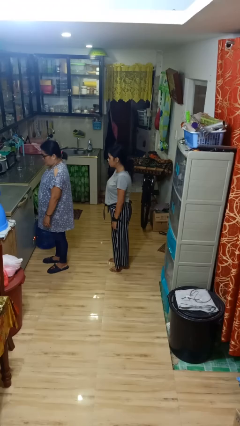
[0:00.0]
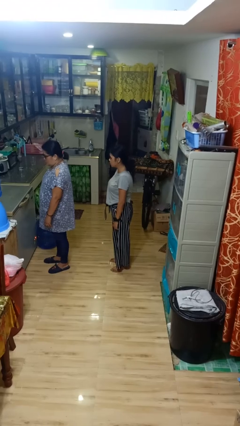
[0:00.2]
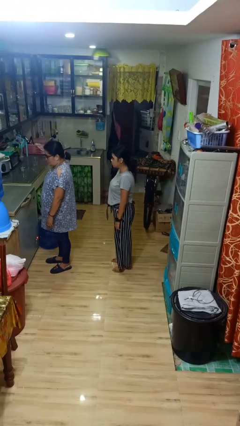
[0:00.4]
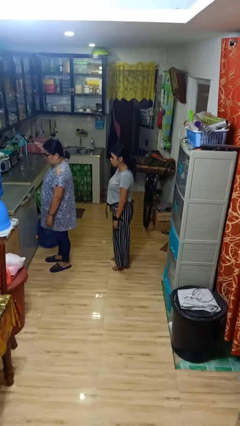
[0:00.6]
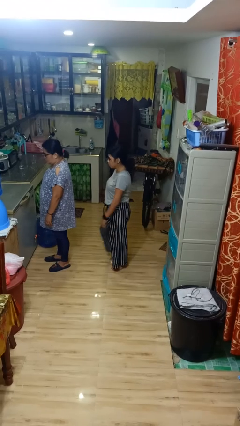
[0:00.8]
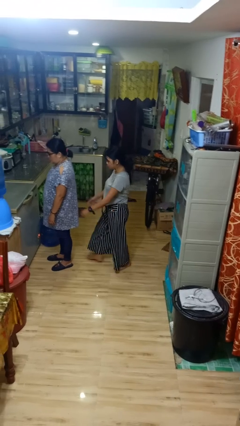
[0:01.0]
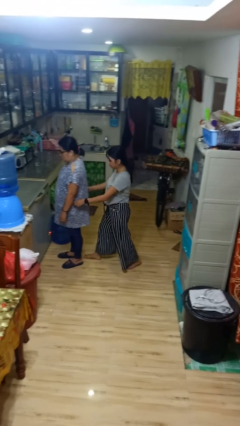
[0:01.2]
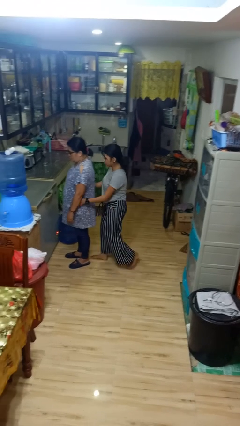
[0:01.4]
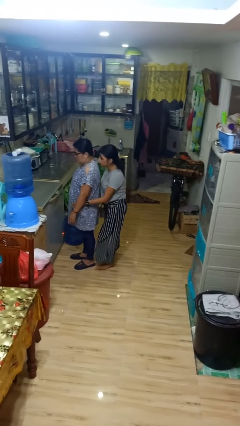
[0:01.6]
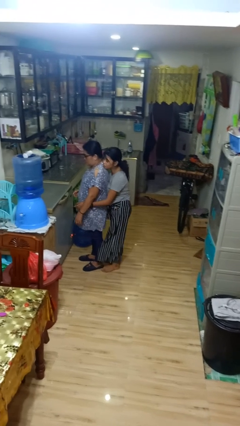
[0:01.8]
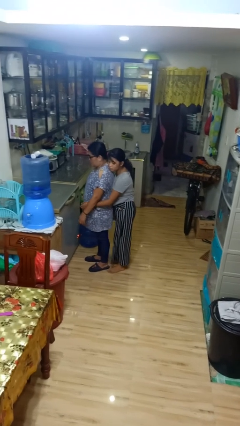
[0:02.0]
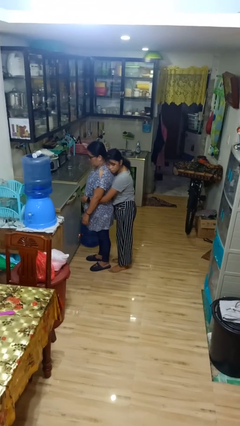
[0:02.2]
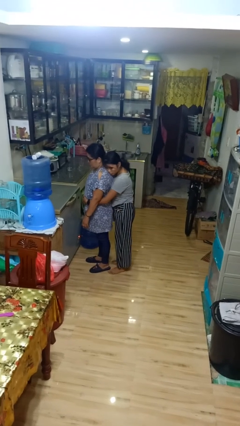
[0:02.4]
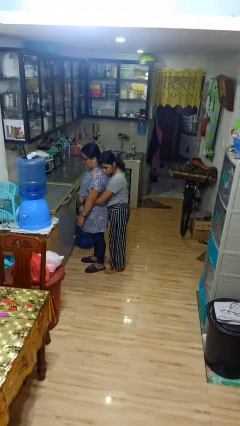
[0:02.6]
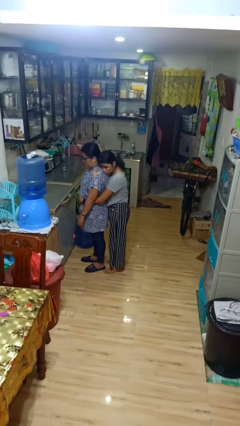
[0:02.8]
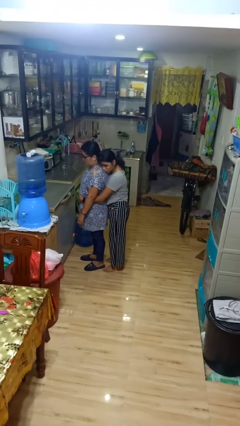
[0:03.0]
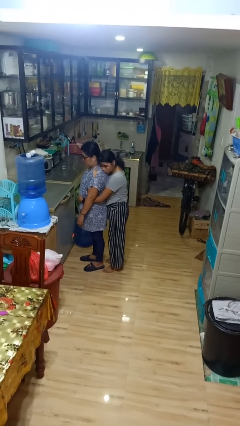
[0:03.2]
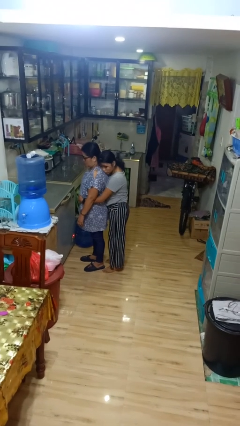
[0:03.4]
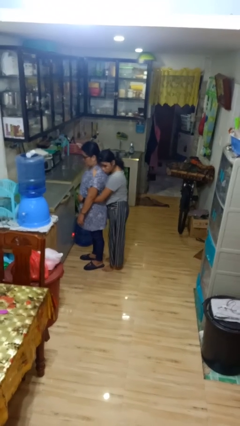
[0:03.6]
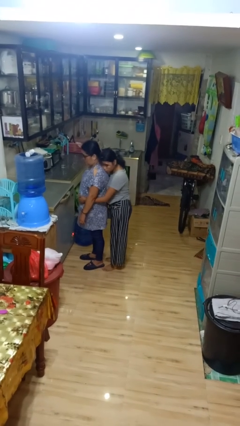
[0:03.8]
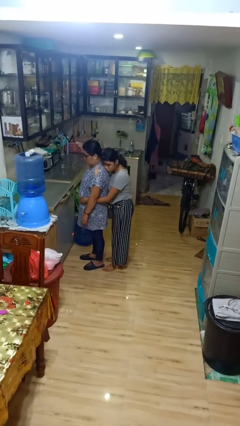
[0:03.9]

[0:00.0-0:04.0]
person hugs person from behind

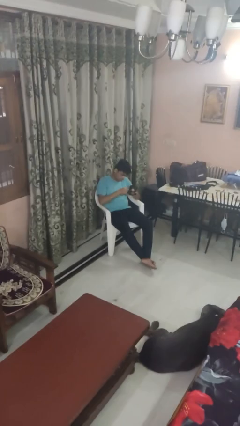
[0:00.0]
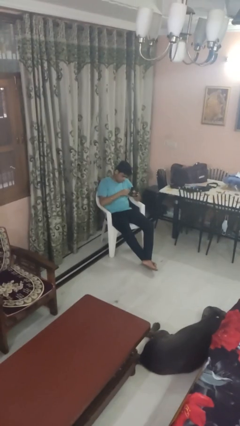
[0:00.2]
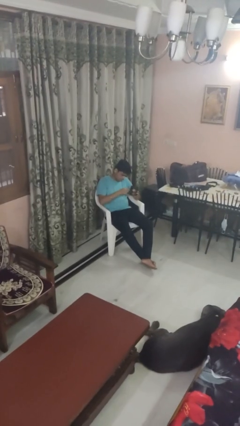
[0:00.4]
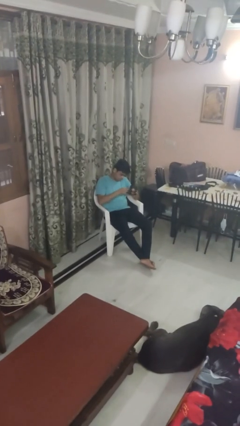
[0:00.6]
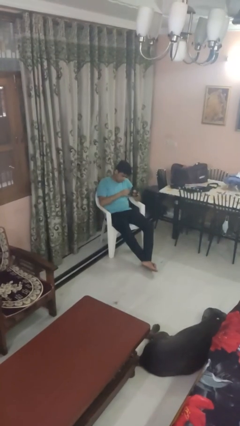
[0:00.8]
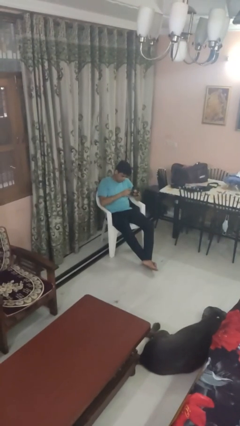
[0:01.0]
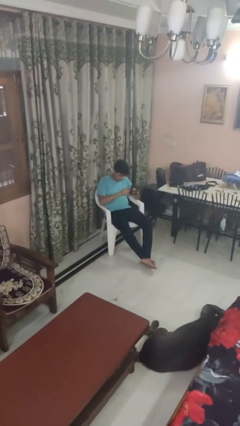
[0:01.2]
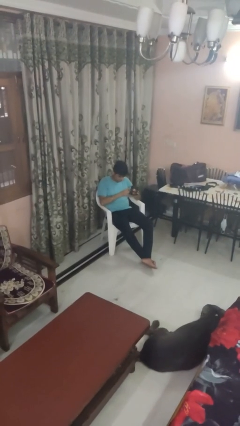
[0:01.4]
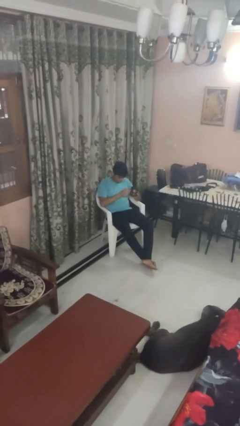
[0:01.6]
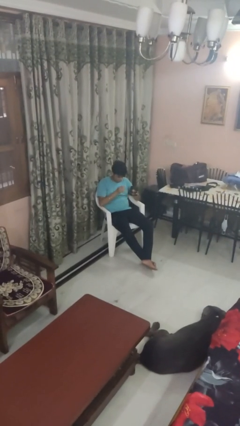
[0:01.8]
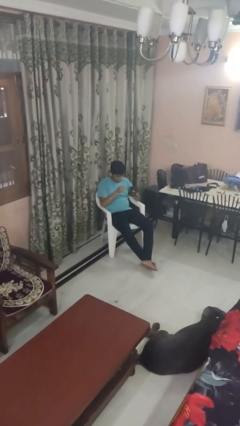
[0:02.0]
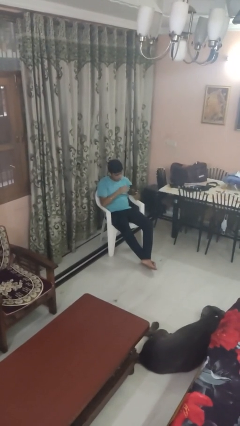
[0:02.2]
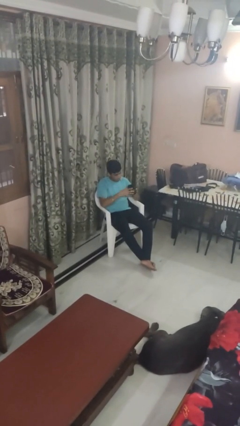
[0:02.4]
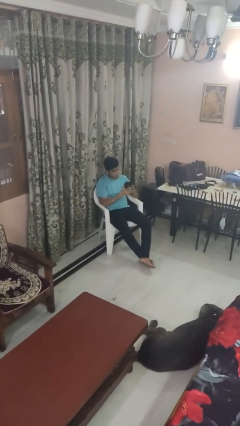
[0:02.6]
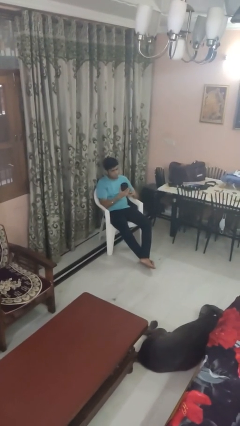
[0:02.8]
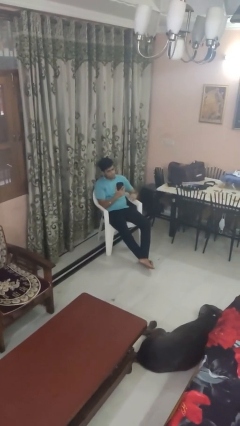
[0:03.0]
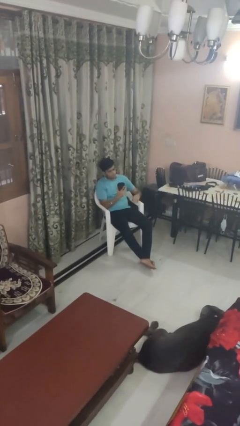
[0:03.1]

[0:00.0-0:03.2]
person taps object with finger

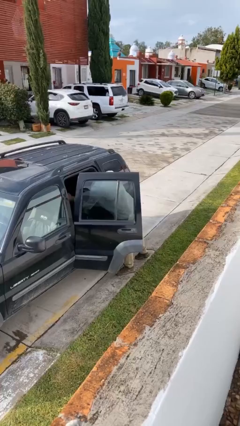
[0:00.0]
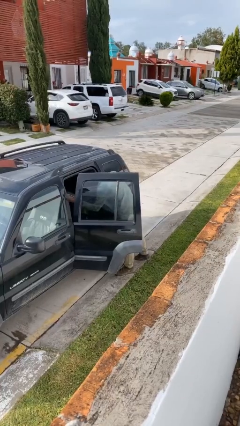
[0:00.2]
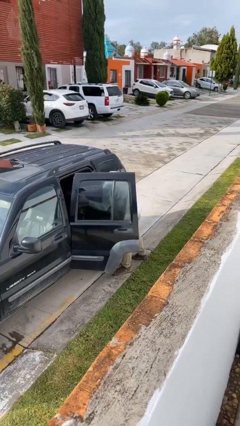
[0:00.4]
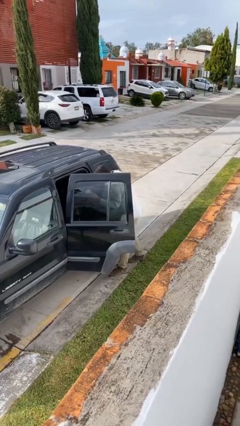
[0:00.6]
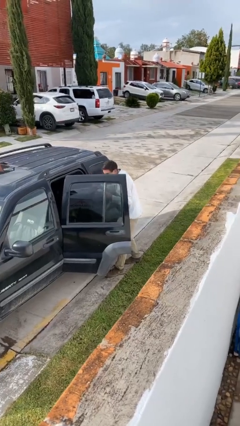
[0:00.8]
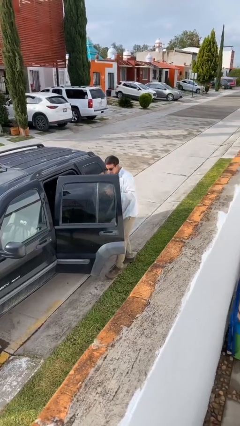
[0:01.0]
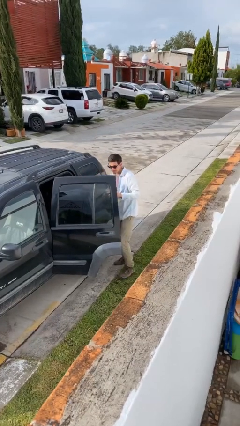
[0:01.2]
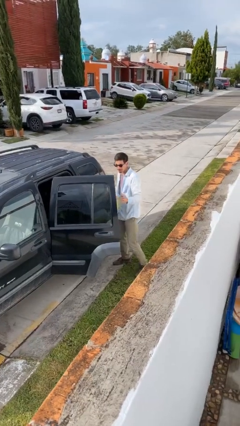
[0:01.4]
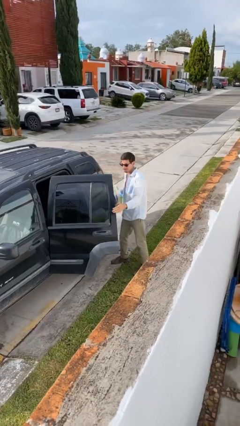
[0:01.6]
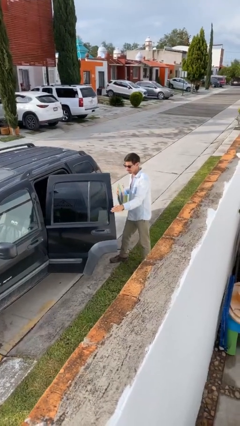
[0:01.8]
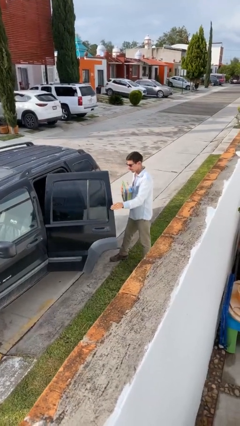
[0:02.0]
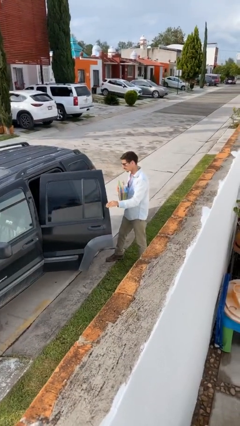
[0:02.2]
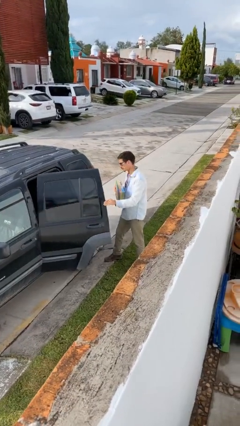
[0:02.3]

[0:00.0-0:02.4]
person unloads car

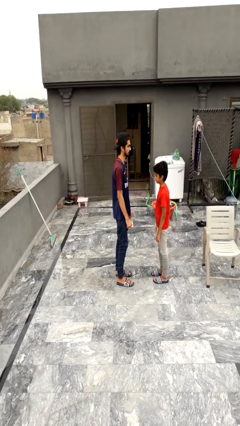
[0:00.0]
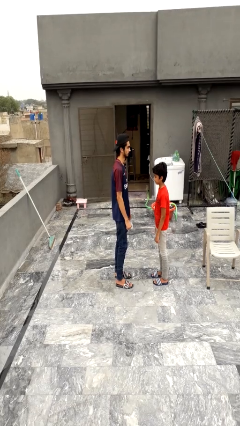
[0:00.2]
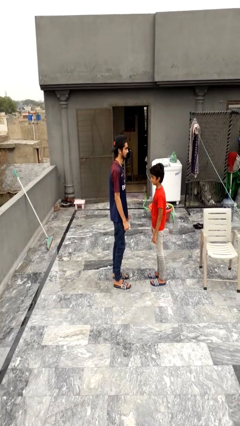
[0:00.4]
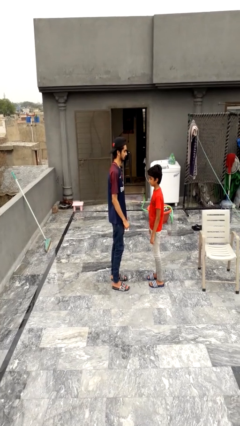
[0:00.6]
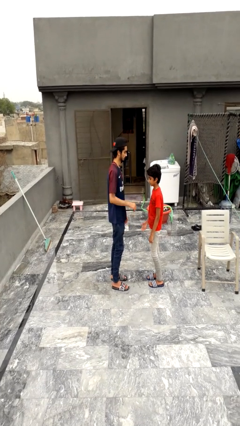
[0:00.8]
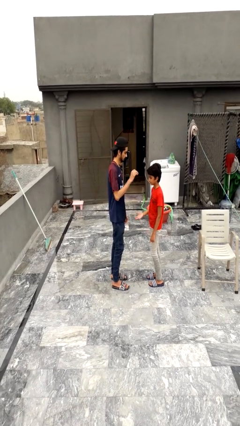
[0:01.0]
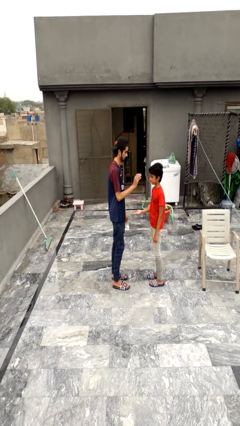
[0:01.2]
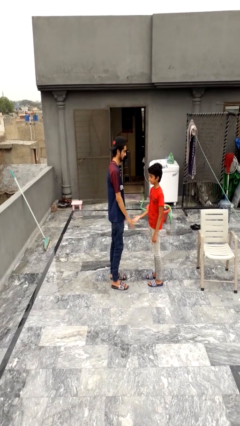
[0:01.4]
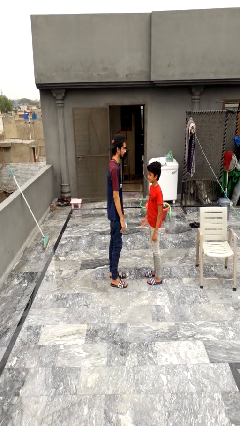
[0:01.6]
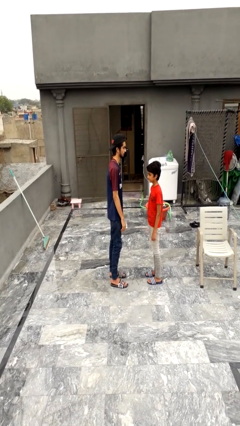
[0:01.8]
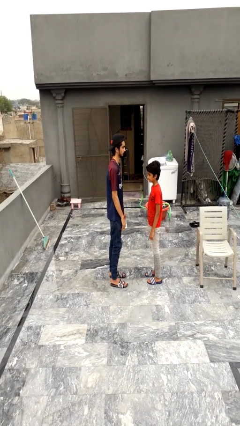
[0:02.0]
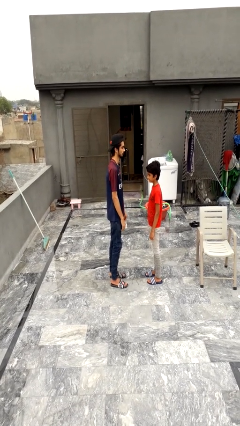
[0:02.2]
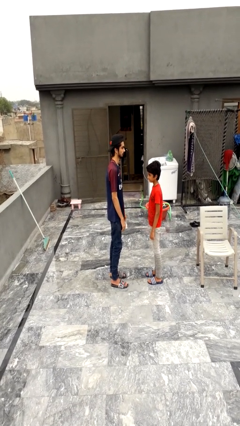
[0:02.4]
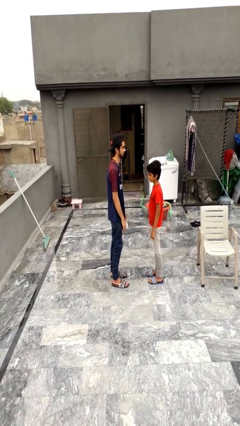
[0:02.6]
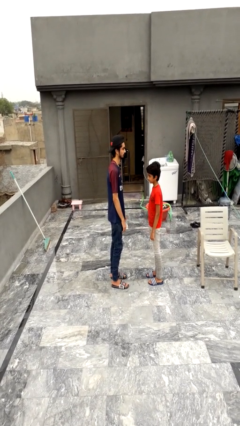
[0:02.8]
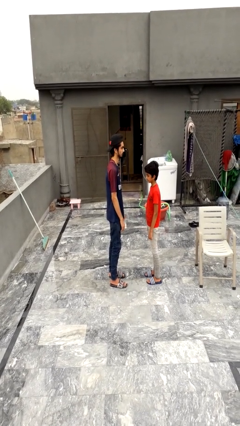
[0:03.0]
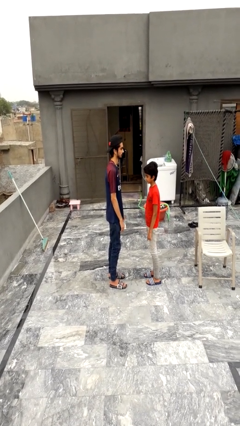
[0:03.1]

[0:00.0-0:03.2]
person highfives hand

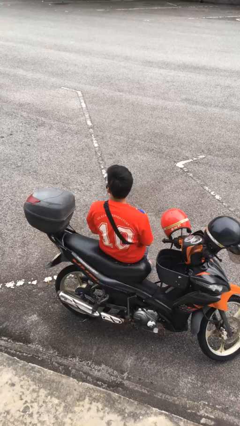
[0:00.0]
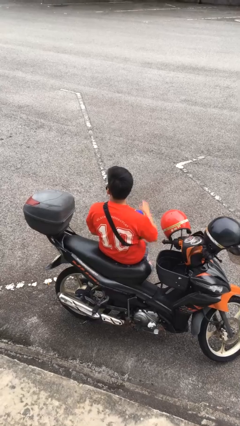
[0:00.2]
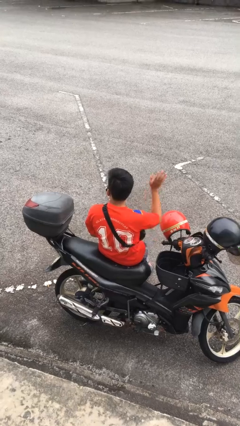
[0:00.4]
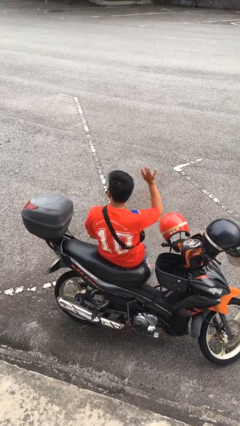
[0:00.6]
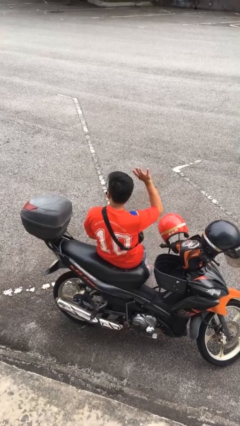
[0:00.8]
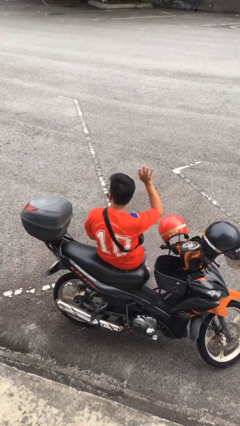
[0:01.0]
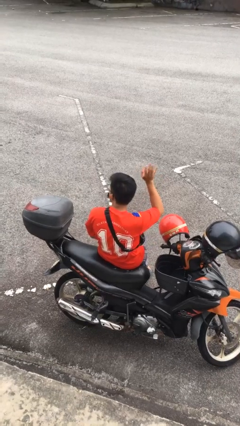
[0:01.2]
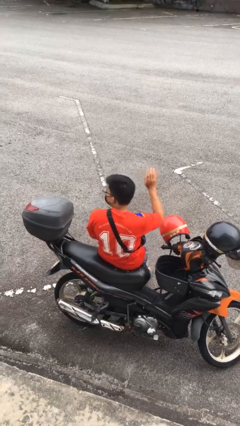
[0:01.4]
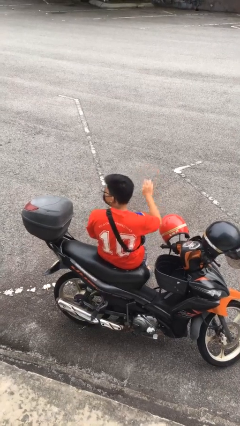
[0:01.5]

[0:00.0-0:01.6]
person waves at person

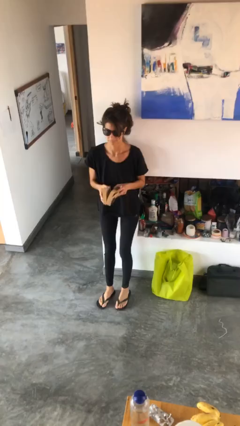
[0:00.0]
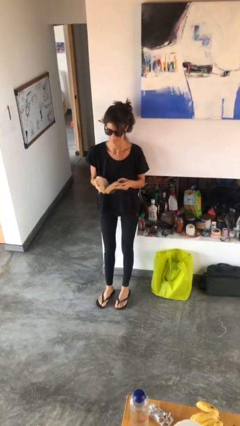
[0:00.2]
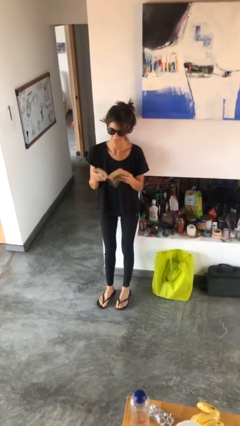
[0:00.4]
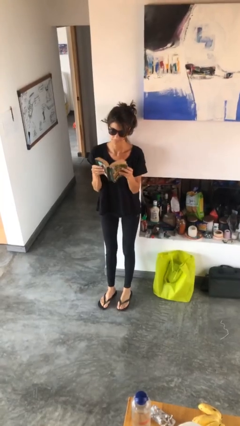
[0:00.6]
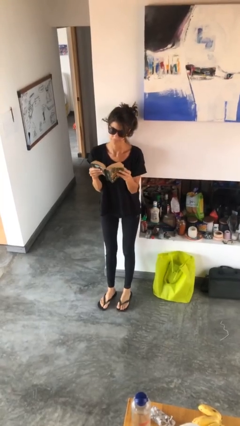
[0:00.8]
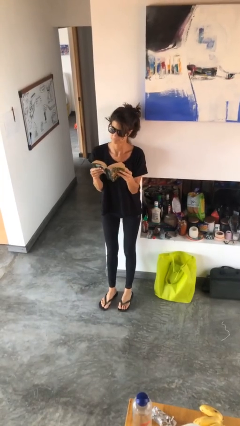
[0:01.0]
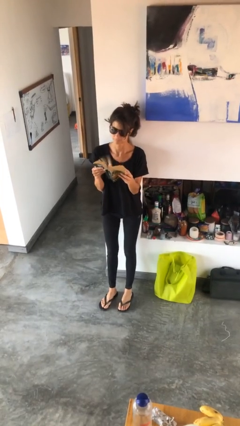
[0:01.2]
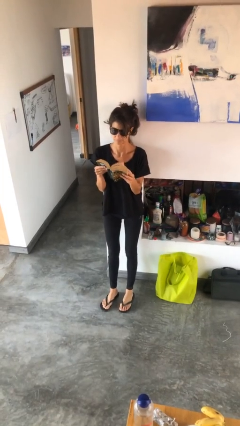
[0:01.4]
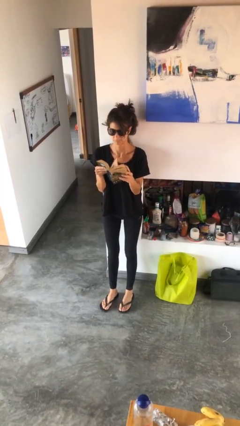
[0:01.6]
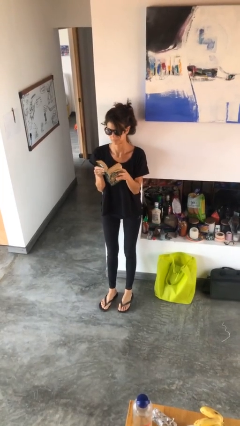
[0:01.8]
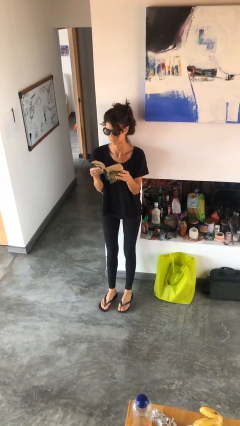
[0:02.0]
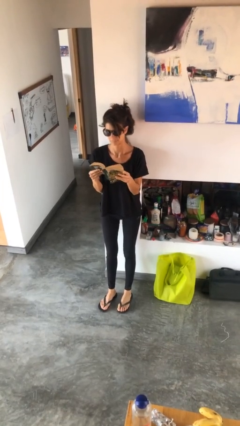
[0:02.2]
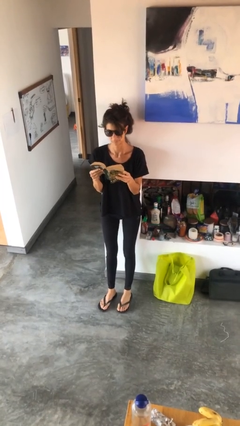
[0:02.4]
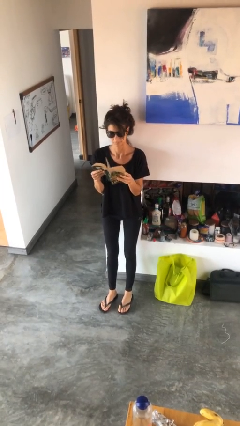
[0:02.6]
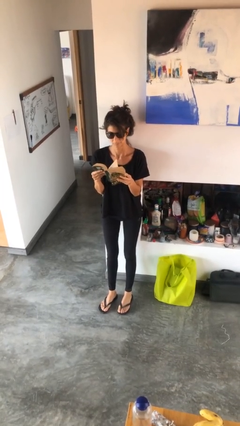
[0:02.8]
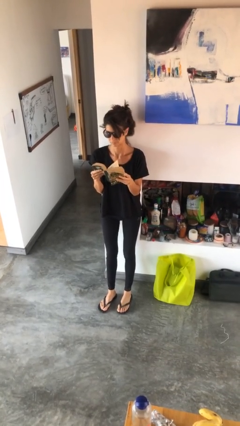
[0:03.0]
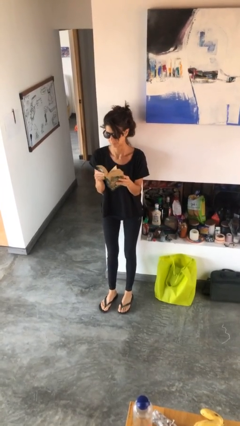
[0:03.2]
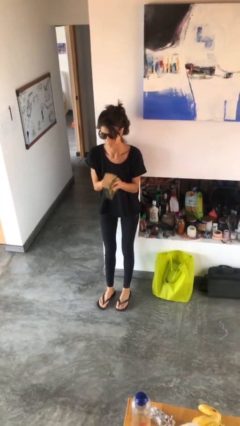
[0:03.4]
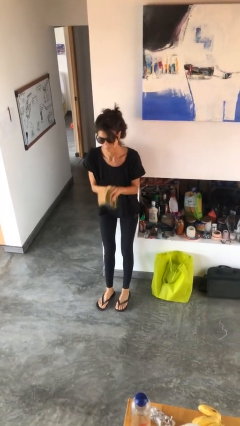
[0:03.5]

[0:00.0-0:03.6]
person reads book
